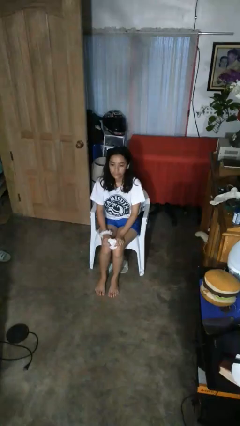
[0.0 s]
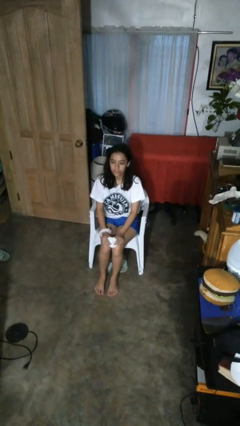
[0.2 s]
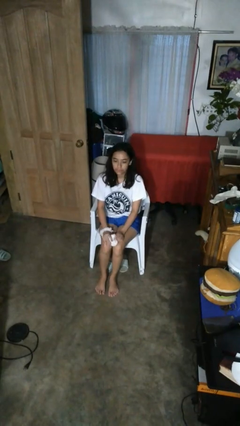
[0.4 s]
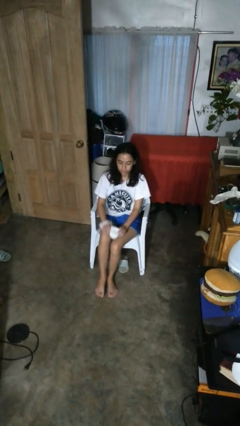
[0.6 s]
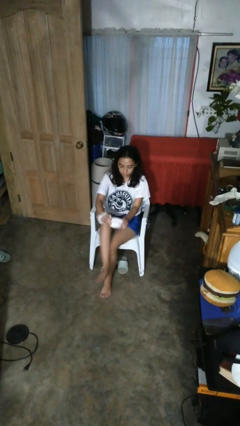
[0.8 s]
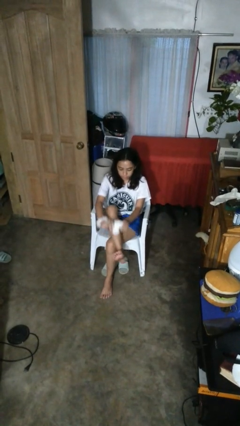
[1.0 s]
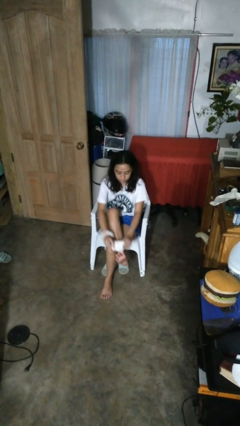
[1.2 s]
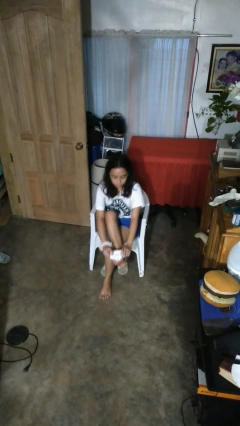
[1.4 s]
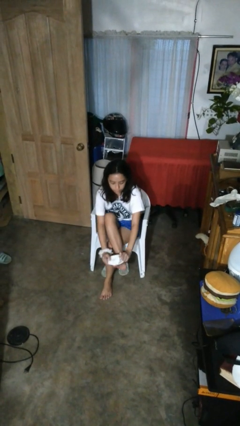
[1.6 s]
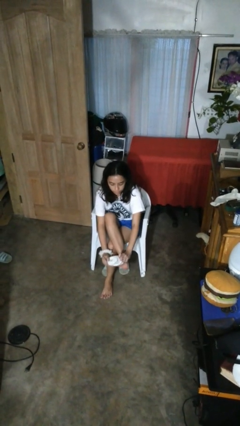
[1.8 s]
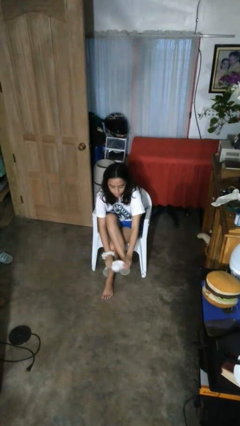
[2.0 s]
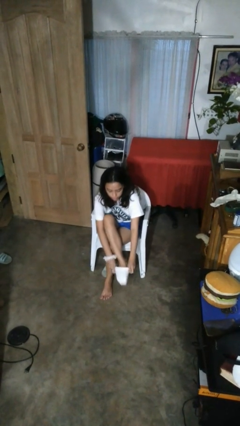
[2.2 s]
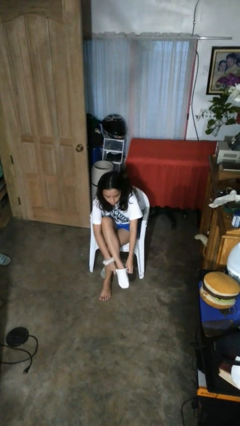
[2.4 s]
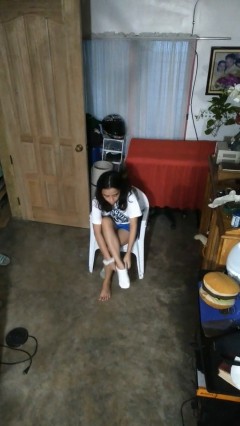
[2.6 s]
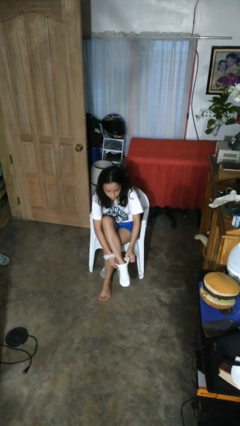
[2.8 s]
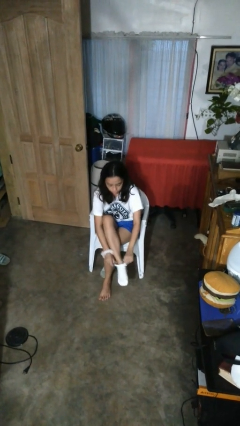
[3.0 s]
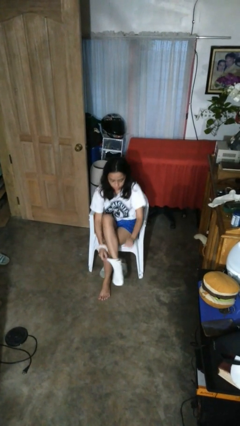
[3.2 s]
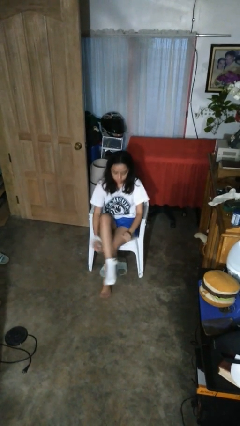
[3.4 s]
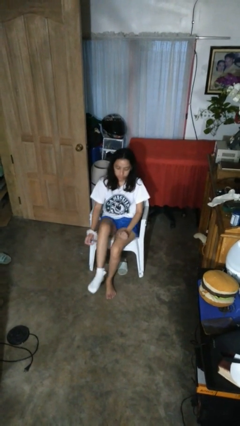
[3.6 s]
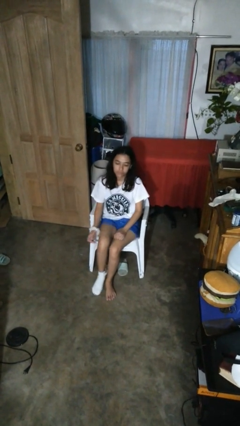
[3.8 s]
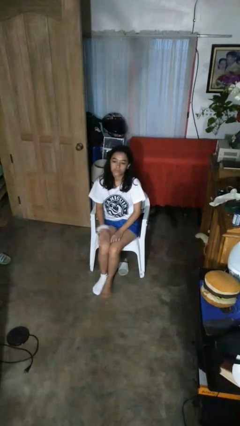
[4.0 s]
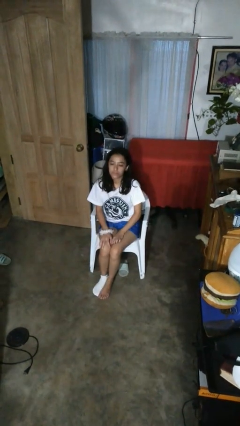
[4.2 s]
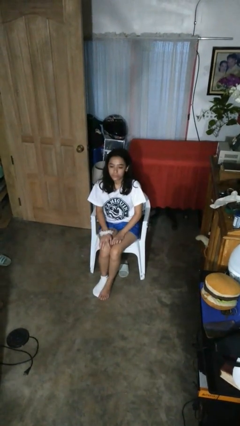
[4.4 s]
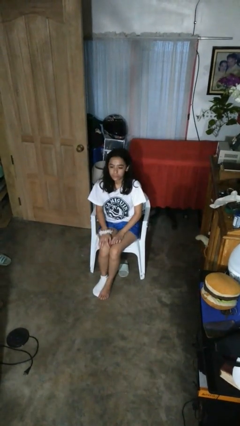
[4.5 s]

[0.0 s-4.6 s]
person puts on socks

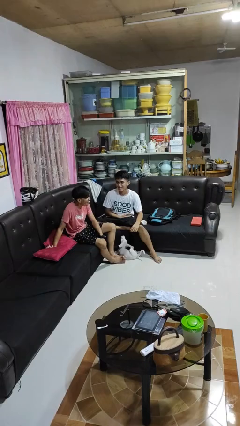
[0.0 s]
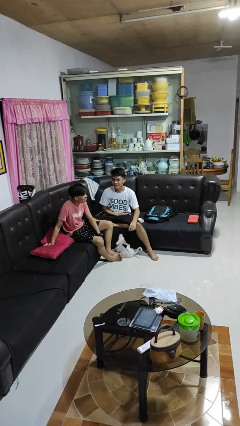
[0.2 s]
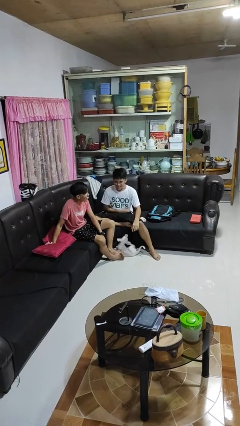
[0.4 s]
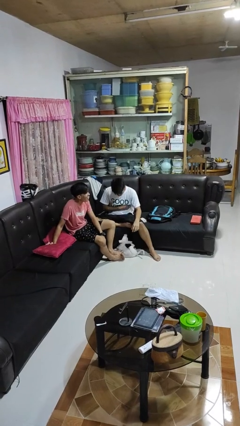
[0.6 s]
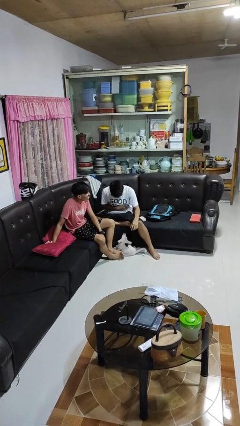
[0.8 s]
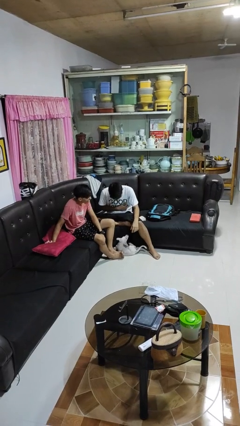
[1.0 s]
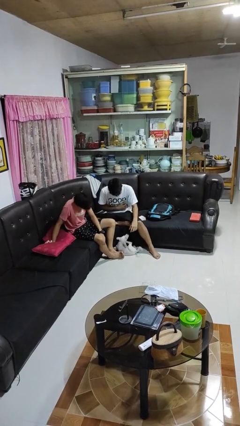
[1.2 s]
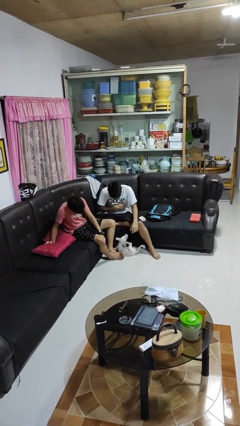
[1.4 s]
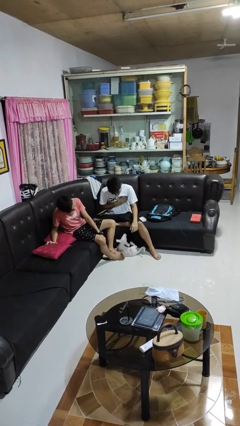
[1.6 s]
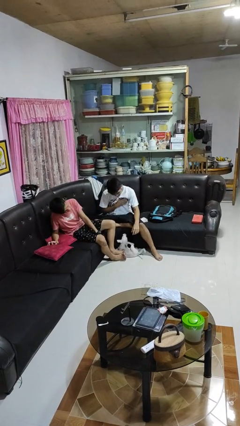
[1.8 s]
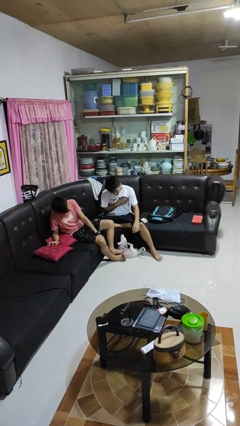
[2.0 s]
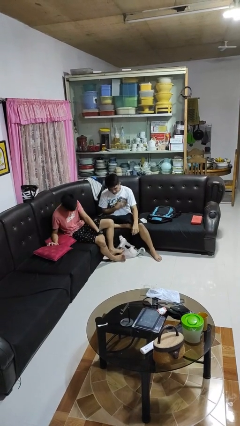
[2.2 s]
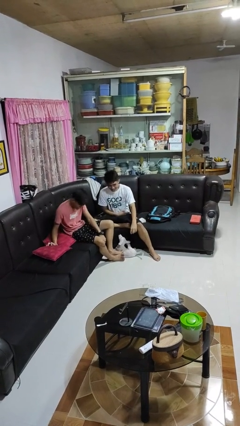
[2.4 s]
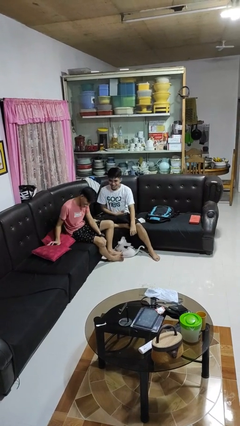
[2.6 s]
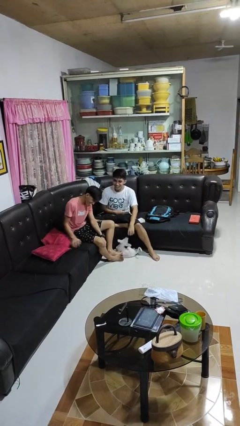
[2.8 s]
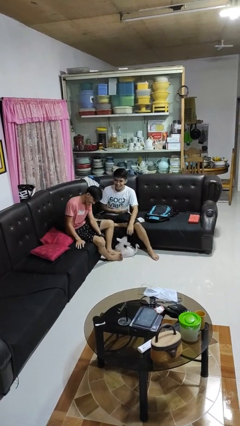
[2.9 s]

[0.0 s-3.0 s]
person laughs with person

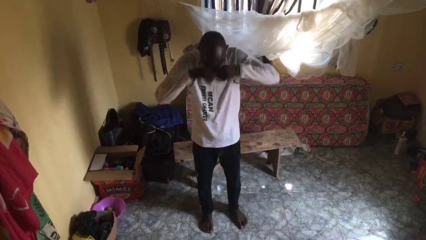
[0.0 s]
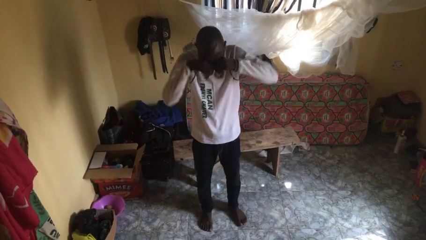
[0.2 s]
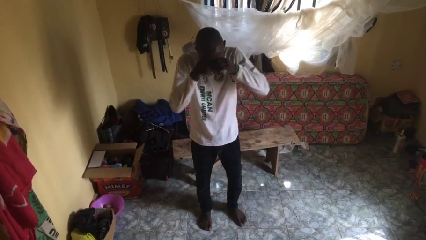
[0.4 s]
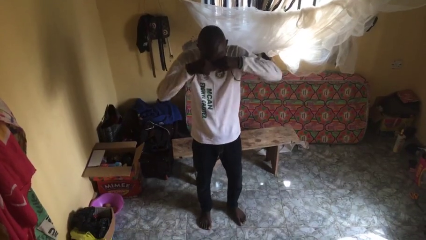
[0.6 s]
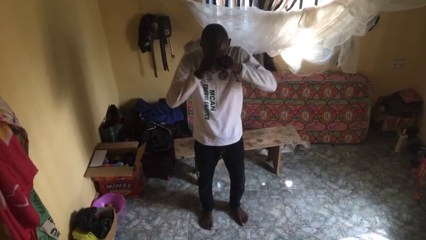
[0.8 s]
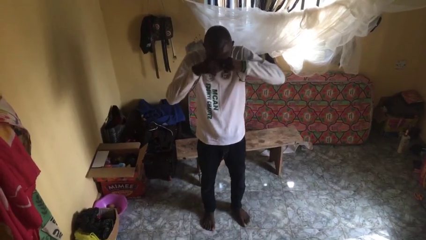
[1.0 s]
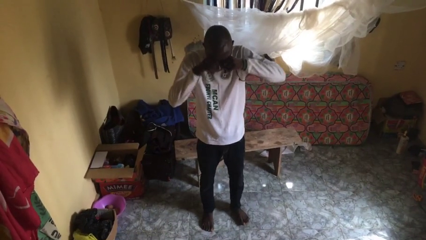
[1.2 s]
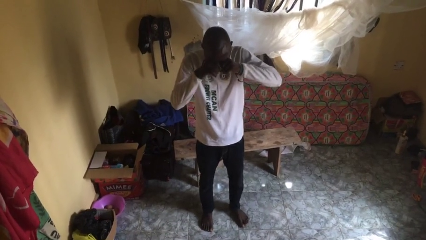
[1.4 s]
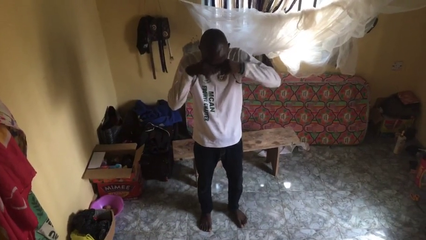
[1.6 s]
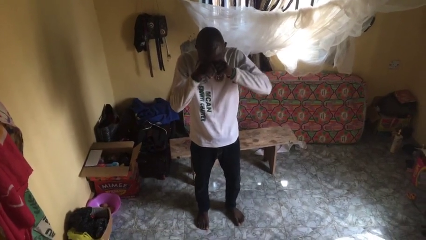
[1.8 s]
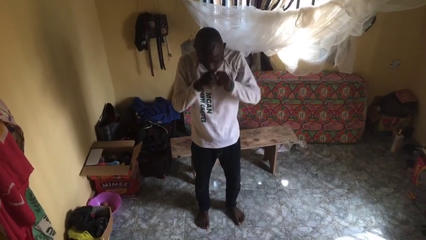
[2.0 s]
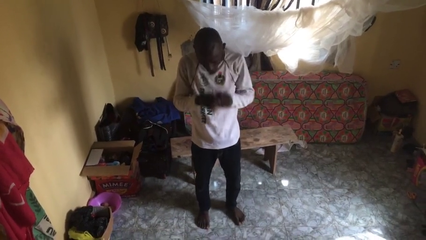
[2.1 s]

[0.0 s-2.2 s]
person rubs eyes

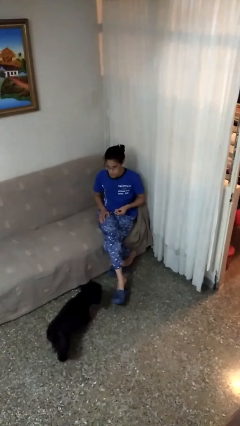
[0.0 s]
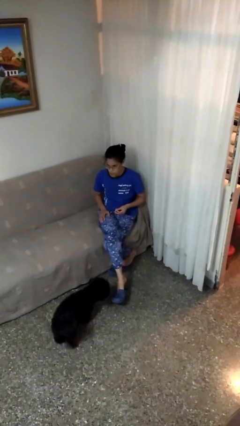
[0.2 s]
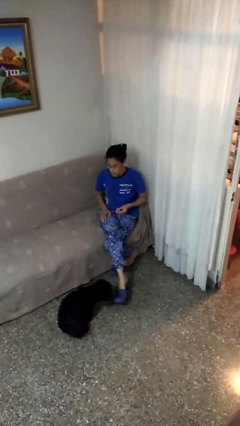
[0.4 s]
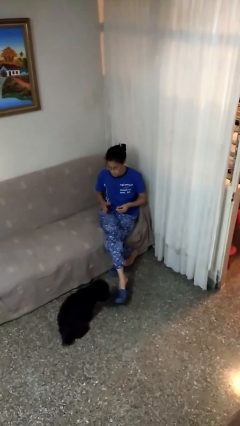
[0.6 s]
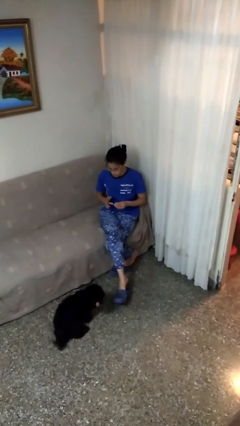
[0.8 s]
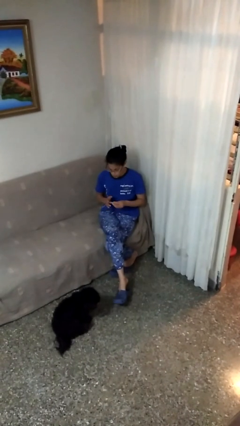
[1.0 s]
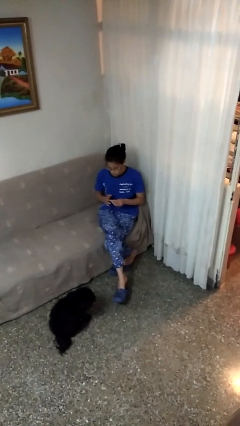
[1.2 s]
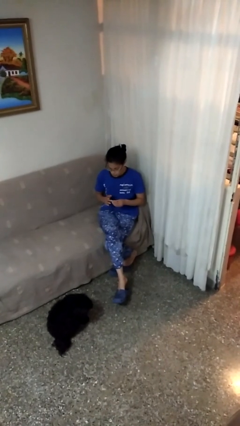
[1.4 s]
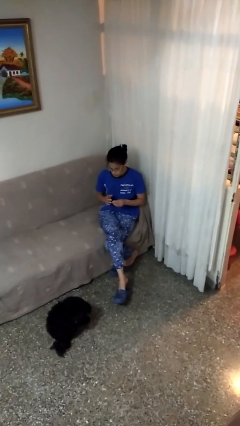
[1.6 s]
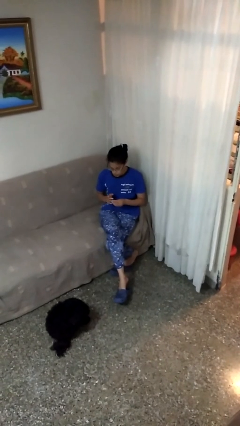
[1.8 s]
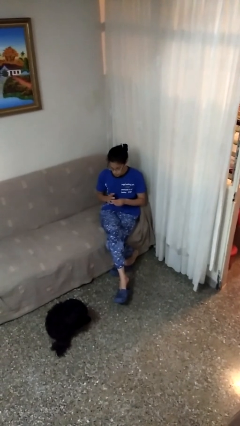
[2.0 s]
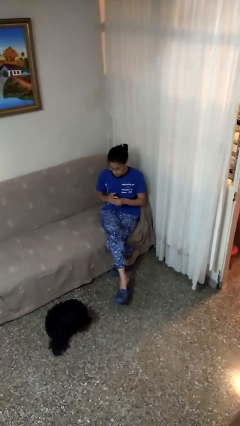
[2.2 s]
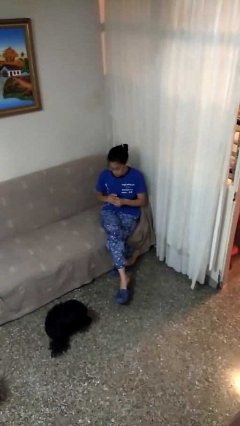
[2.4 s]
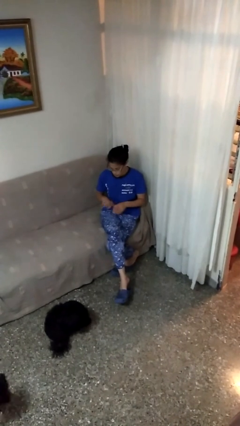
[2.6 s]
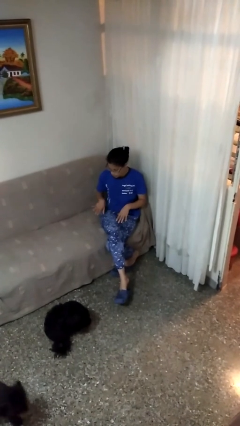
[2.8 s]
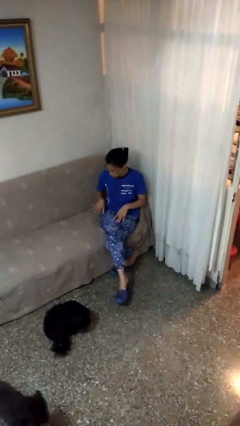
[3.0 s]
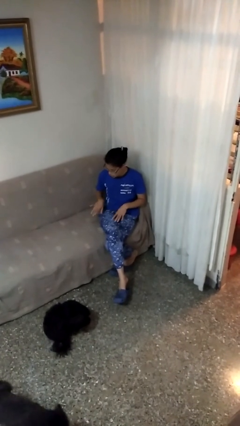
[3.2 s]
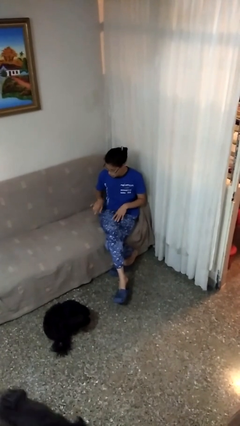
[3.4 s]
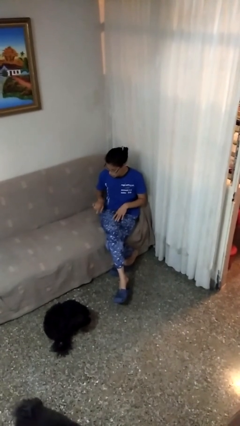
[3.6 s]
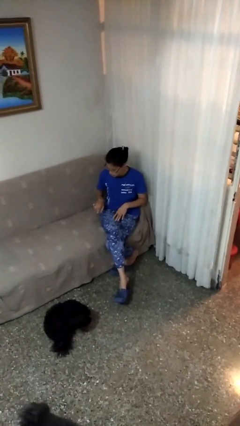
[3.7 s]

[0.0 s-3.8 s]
person puts on ring

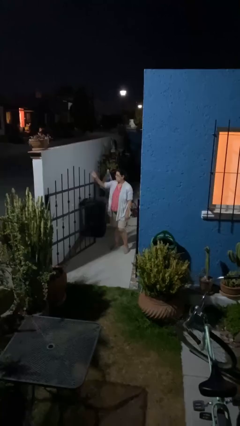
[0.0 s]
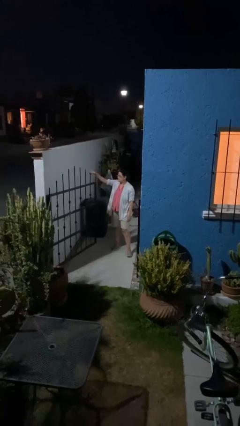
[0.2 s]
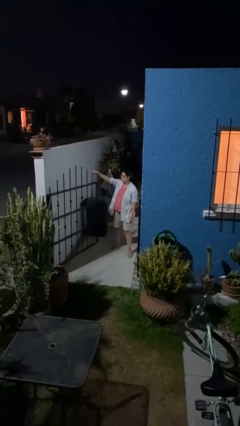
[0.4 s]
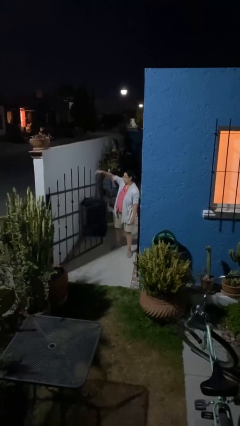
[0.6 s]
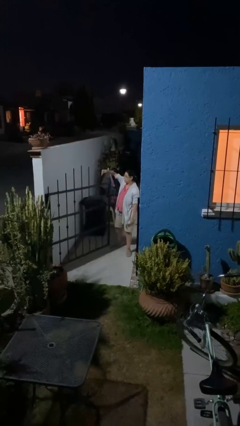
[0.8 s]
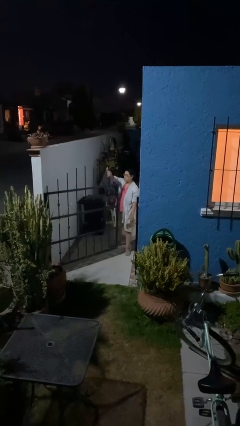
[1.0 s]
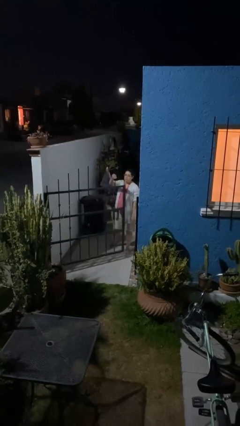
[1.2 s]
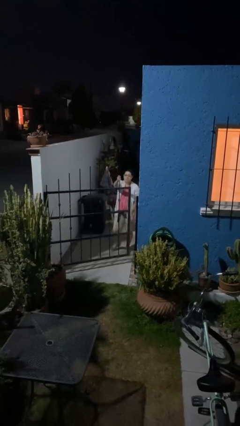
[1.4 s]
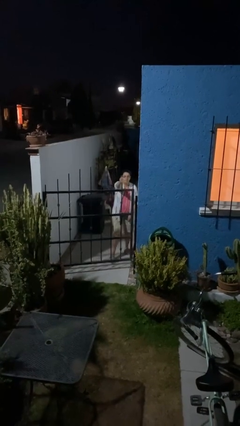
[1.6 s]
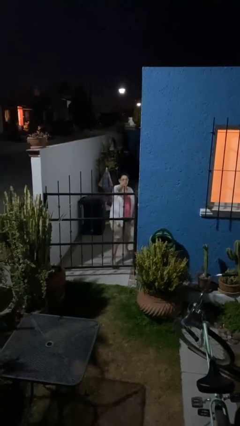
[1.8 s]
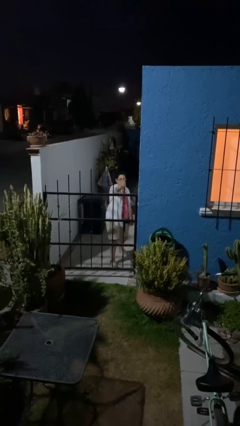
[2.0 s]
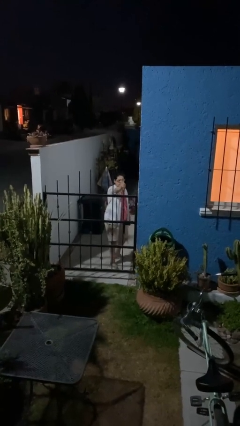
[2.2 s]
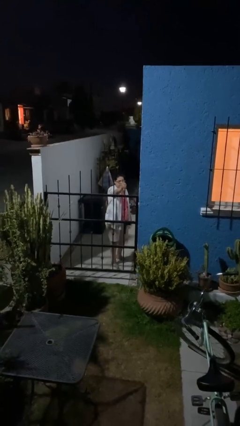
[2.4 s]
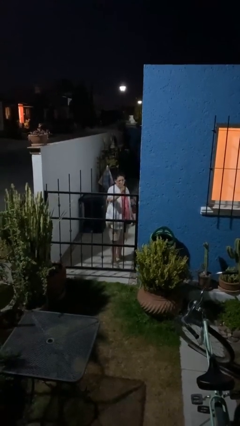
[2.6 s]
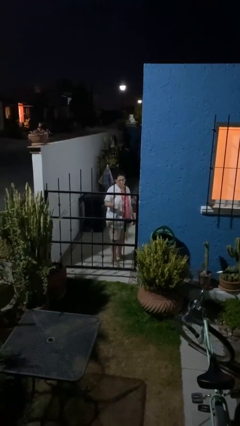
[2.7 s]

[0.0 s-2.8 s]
person closes facility door

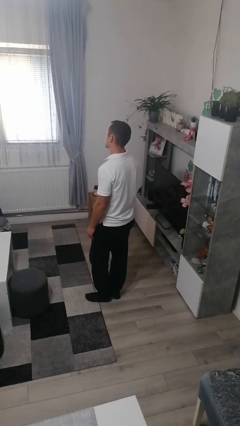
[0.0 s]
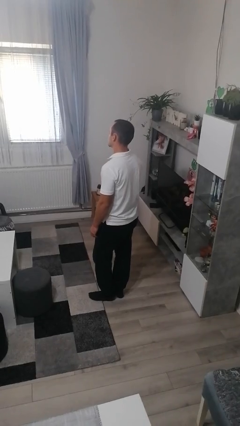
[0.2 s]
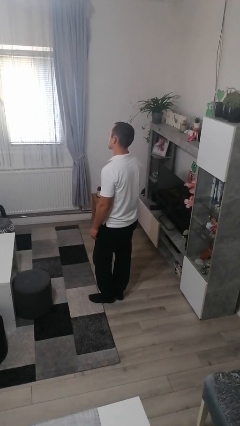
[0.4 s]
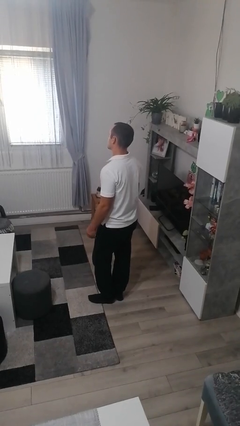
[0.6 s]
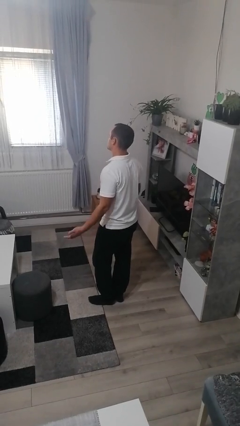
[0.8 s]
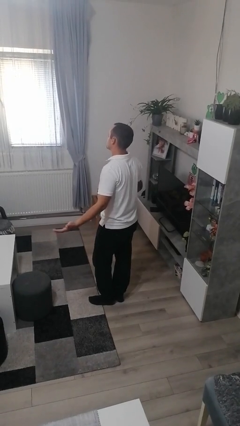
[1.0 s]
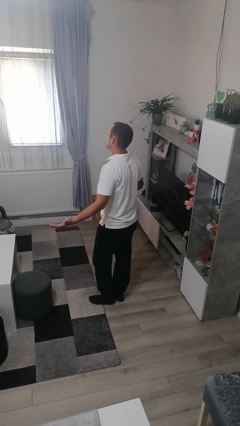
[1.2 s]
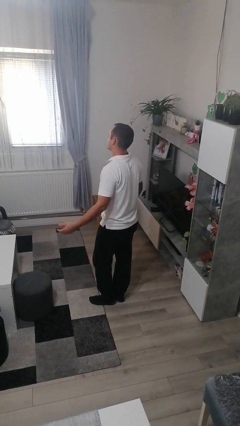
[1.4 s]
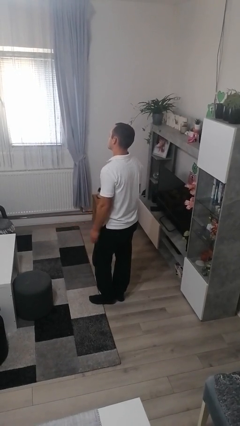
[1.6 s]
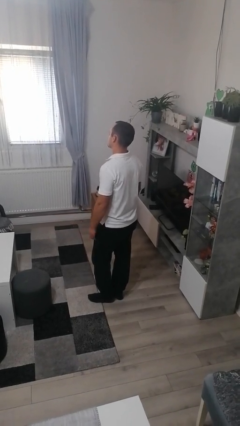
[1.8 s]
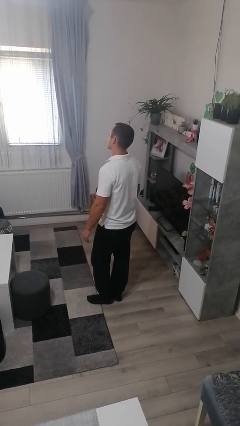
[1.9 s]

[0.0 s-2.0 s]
person shrugs
